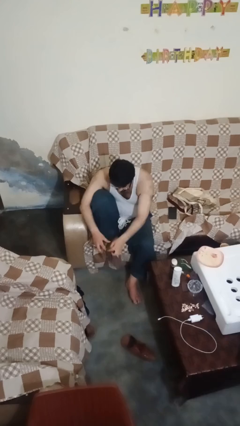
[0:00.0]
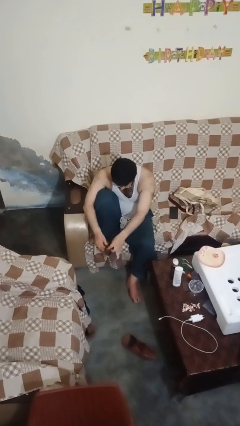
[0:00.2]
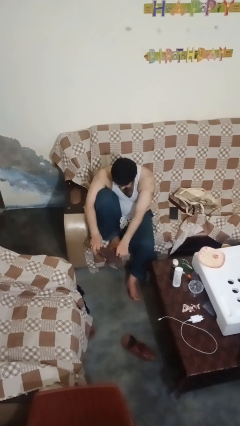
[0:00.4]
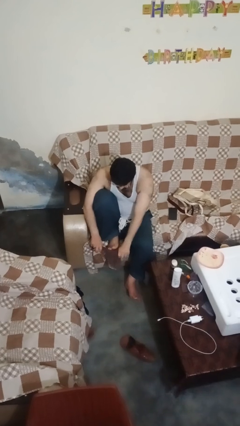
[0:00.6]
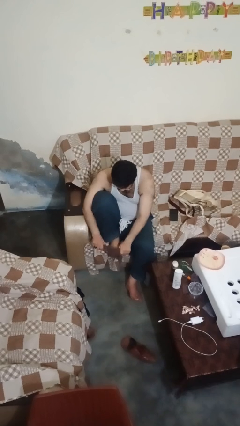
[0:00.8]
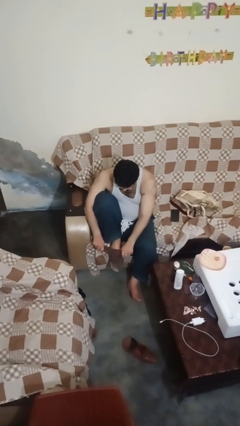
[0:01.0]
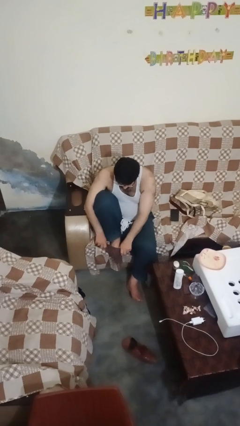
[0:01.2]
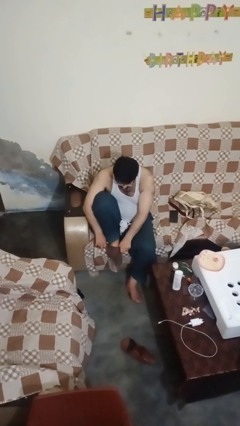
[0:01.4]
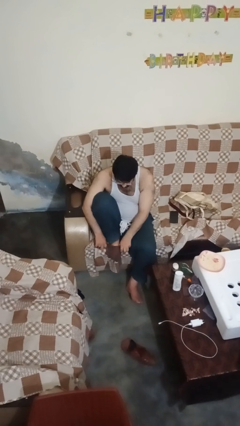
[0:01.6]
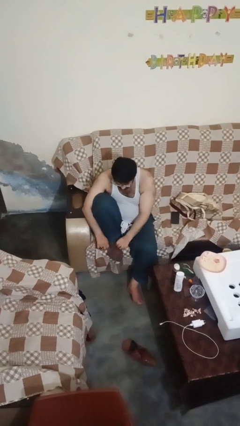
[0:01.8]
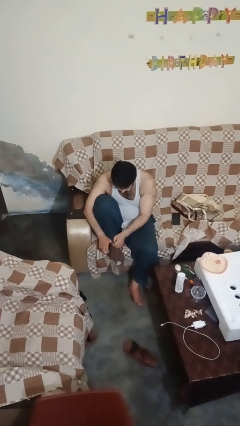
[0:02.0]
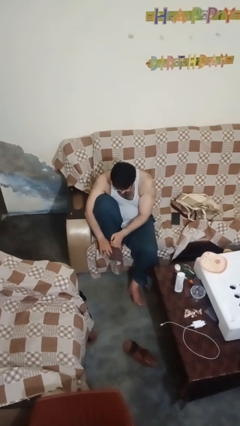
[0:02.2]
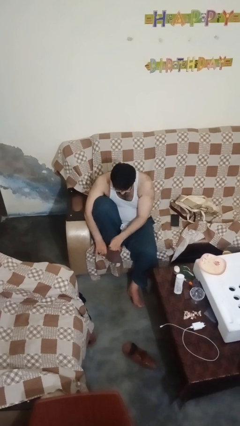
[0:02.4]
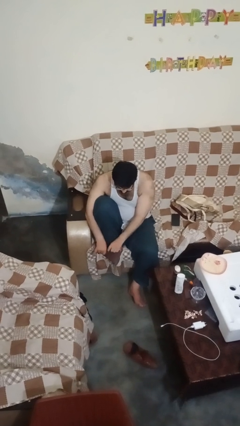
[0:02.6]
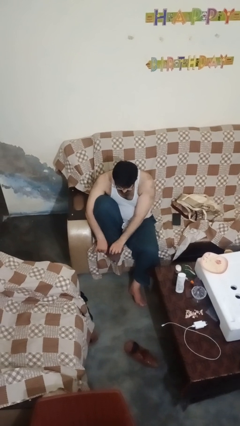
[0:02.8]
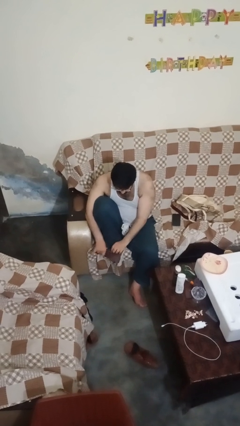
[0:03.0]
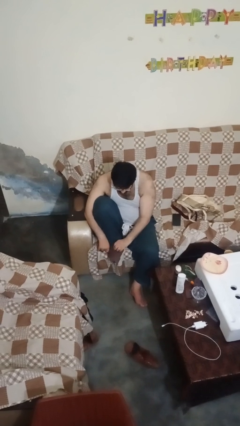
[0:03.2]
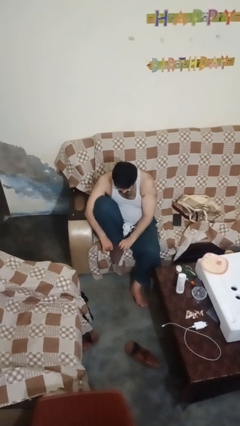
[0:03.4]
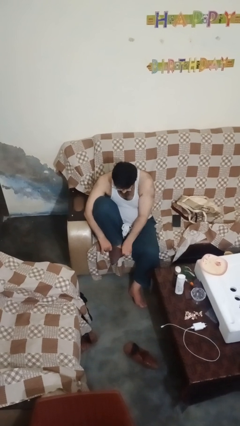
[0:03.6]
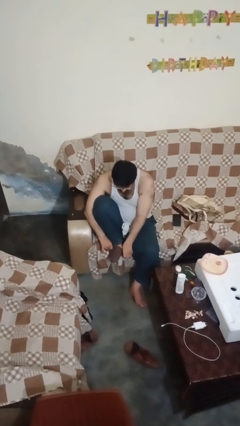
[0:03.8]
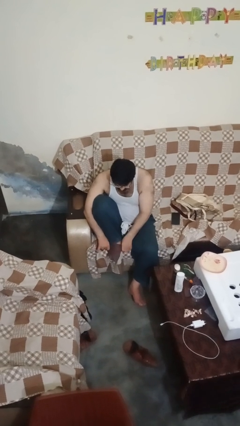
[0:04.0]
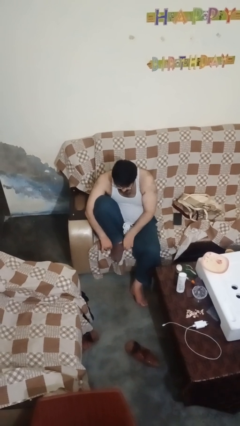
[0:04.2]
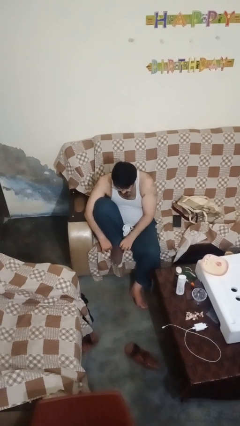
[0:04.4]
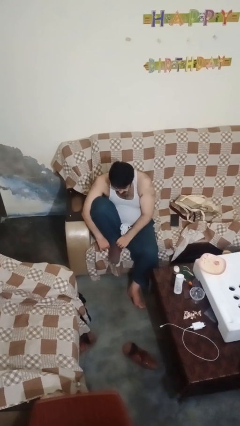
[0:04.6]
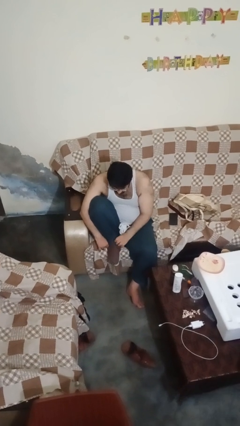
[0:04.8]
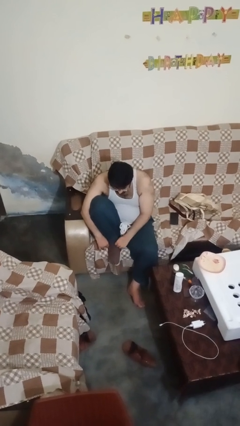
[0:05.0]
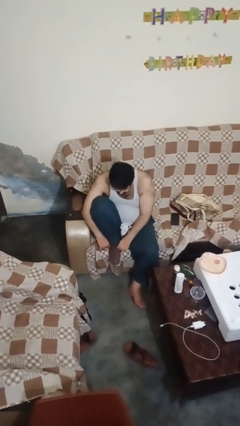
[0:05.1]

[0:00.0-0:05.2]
person puts on socks

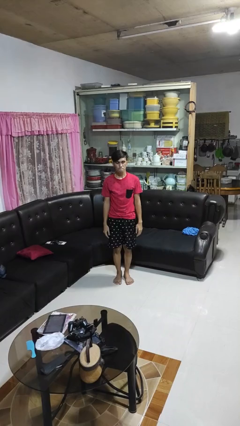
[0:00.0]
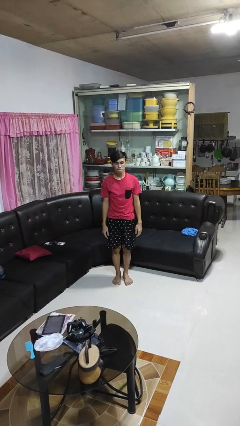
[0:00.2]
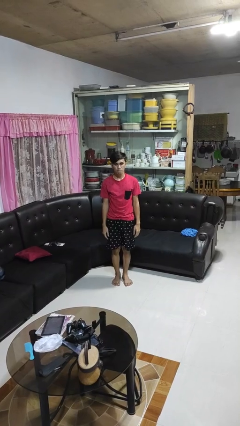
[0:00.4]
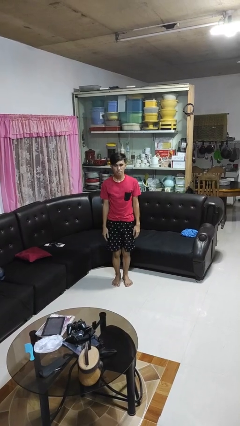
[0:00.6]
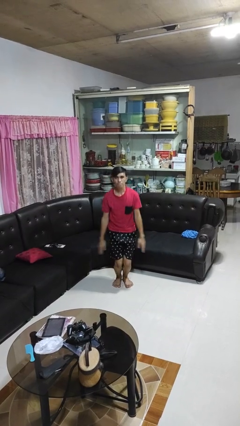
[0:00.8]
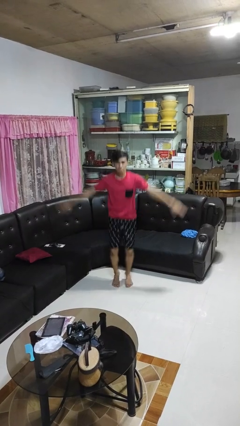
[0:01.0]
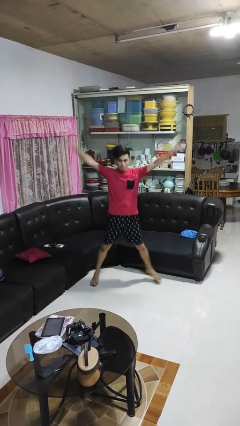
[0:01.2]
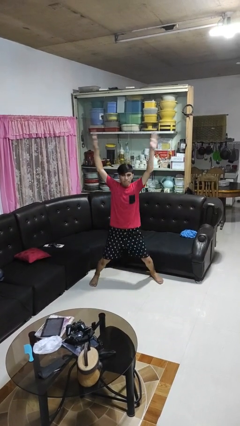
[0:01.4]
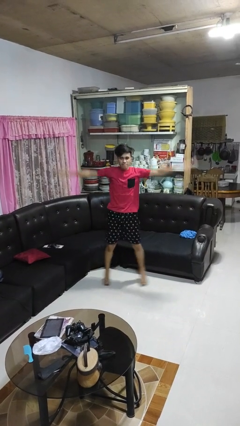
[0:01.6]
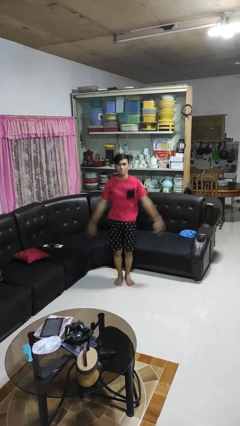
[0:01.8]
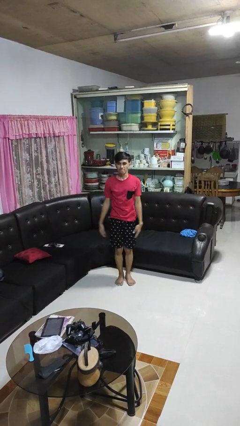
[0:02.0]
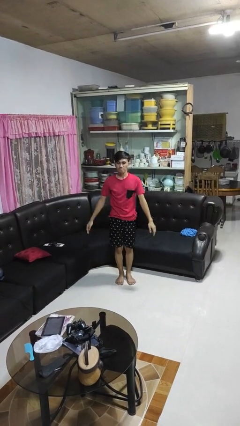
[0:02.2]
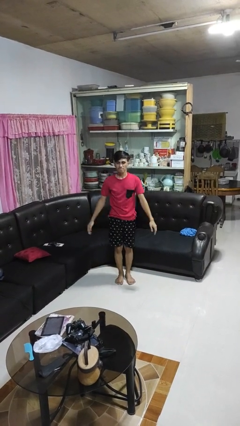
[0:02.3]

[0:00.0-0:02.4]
person exercises with jumping jacks

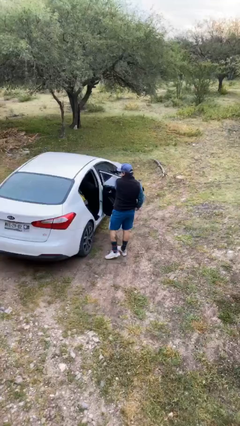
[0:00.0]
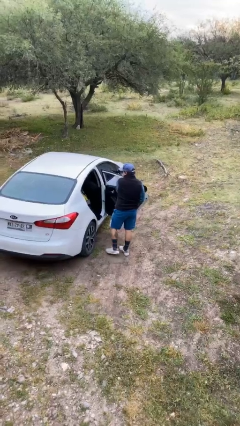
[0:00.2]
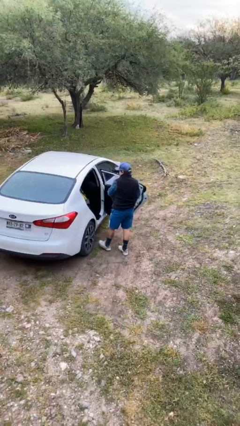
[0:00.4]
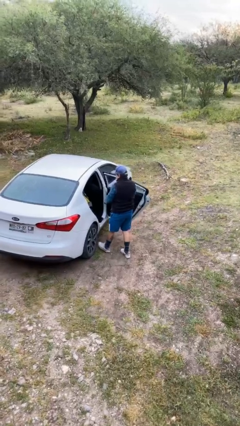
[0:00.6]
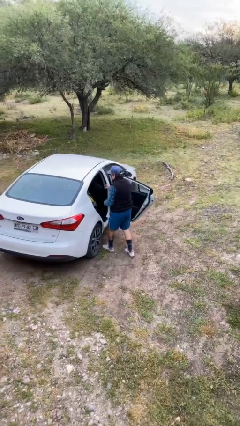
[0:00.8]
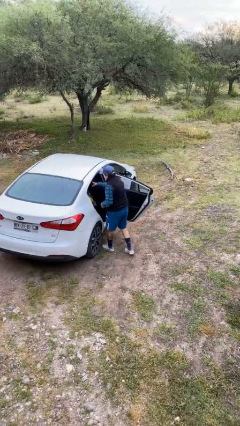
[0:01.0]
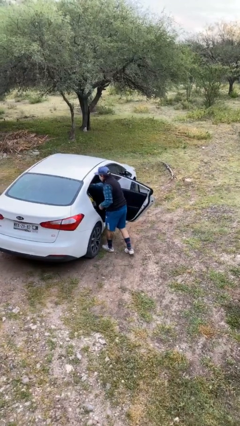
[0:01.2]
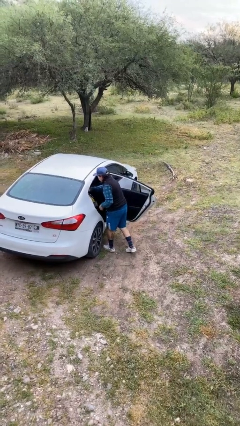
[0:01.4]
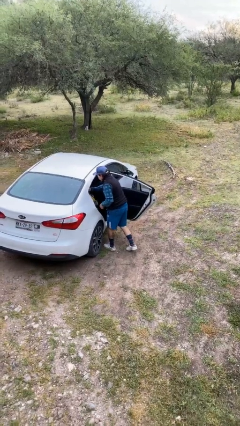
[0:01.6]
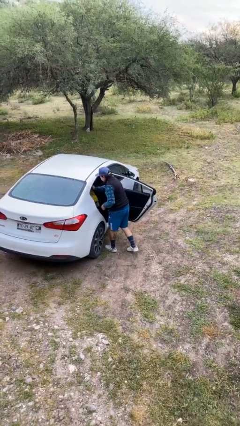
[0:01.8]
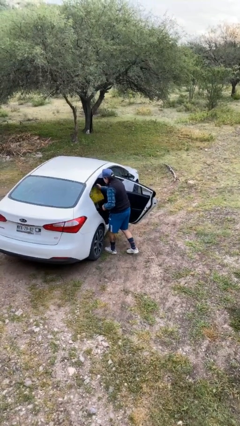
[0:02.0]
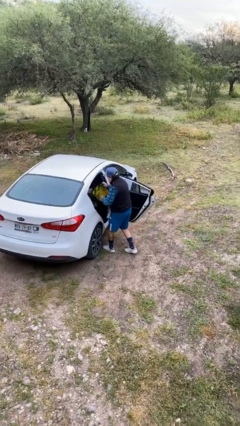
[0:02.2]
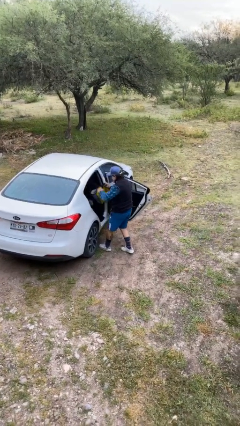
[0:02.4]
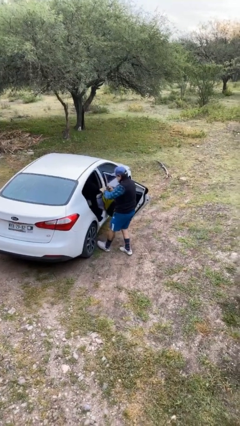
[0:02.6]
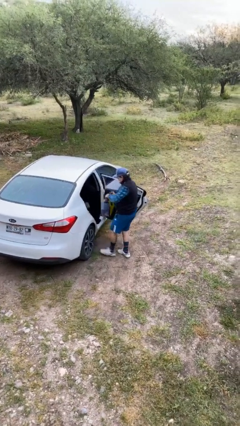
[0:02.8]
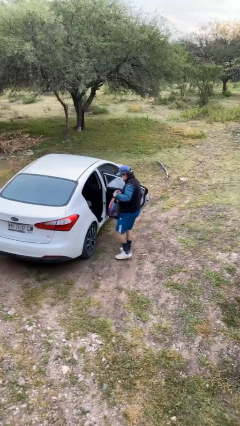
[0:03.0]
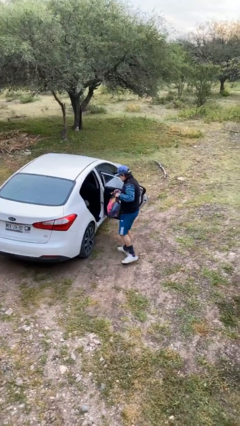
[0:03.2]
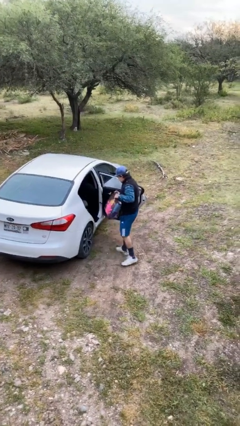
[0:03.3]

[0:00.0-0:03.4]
person unloads car

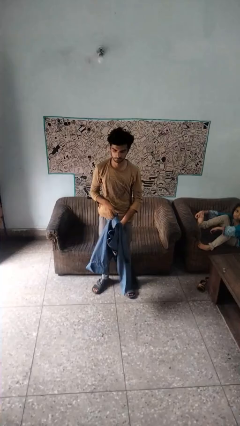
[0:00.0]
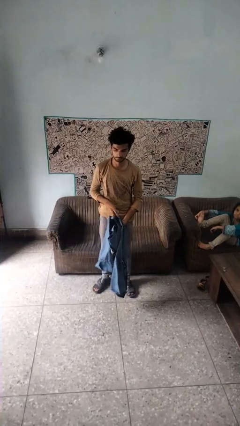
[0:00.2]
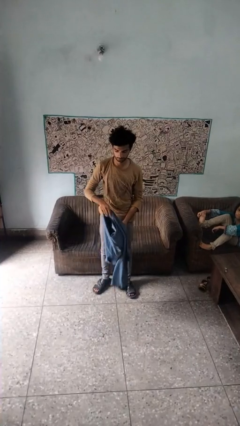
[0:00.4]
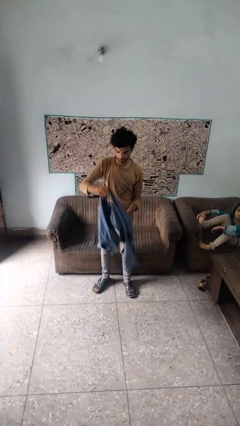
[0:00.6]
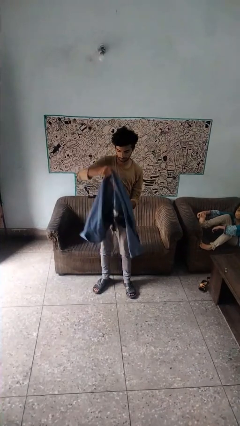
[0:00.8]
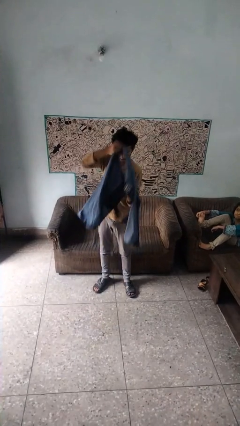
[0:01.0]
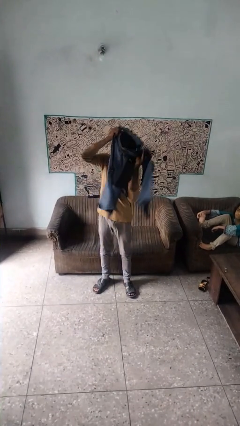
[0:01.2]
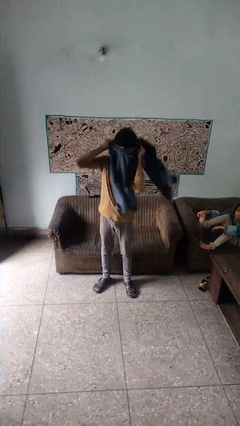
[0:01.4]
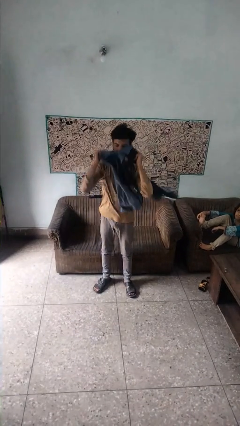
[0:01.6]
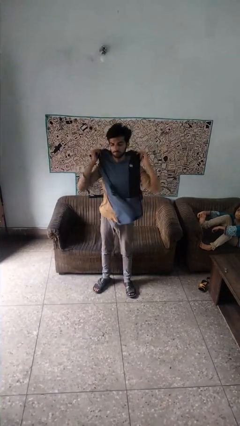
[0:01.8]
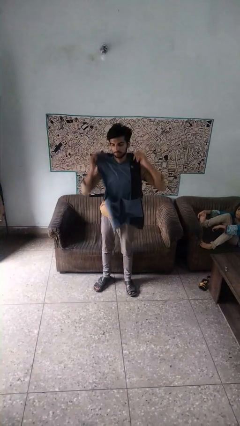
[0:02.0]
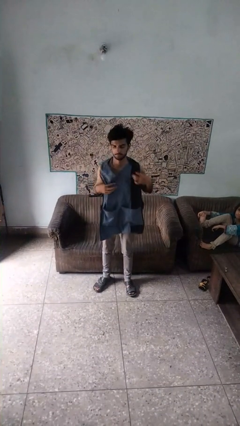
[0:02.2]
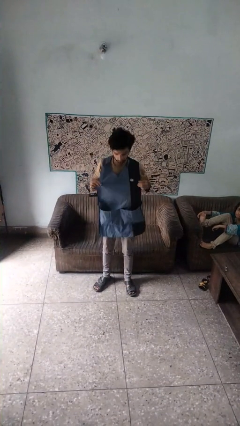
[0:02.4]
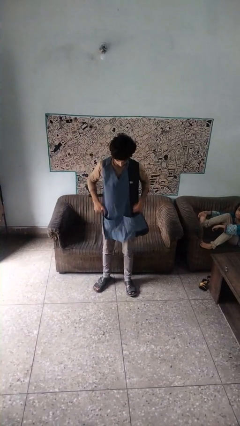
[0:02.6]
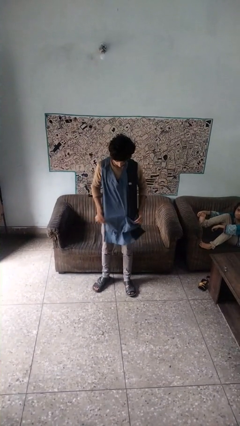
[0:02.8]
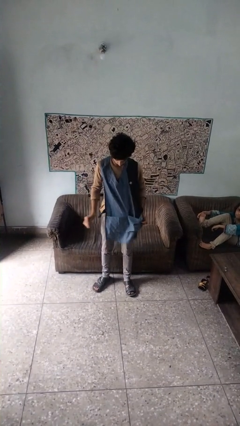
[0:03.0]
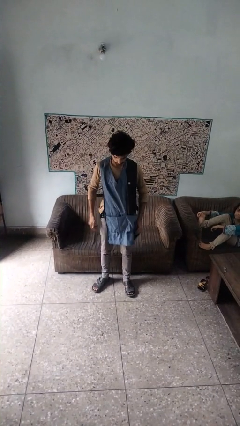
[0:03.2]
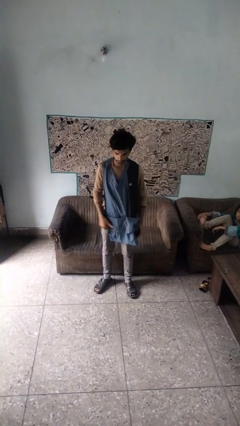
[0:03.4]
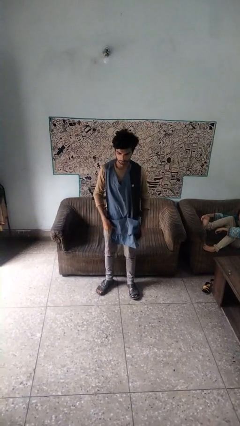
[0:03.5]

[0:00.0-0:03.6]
person puts on apron

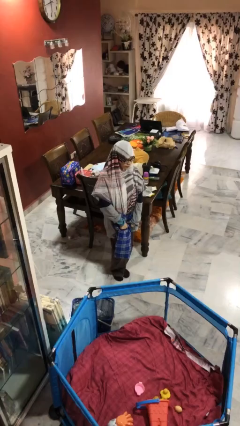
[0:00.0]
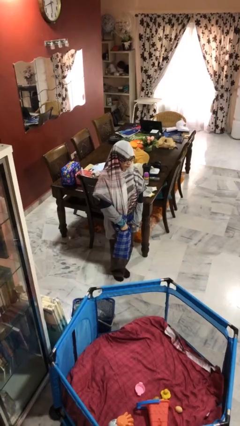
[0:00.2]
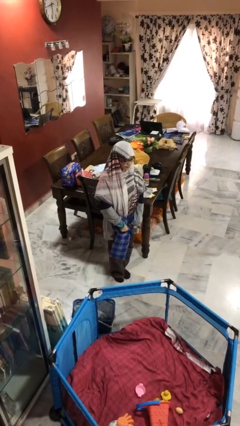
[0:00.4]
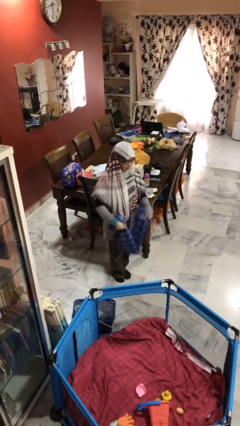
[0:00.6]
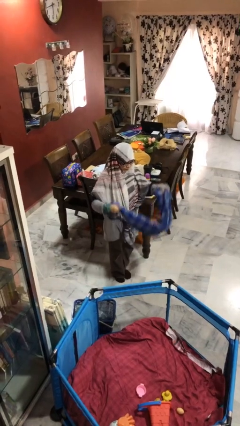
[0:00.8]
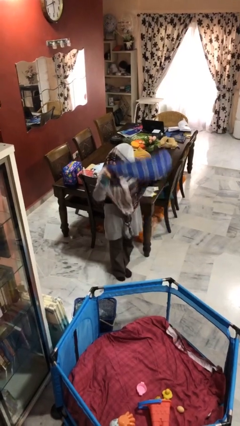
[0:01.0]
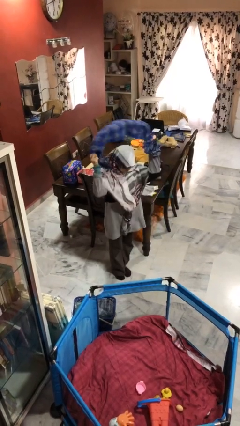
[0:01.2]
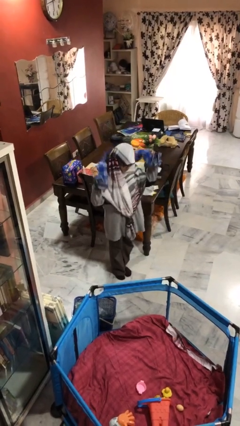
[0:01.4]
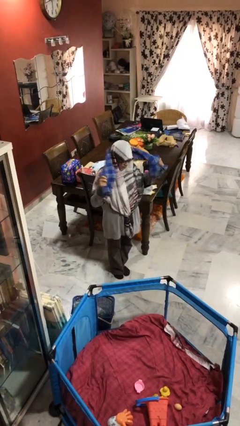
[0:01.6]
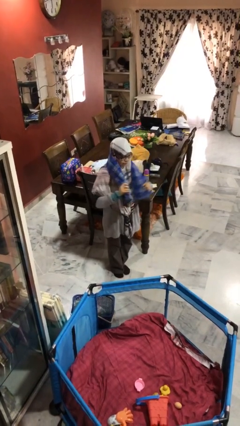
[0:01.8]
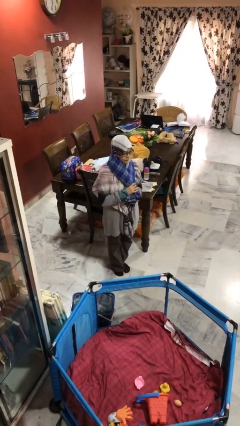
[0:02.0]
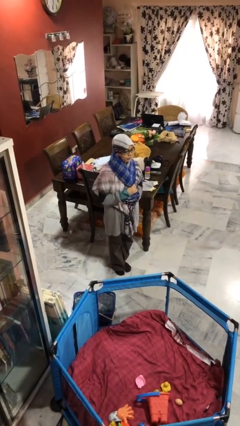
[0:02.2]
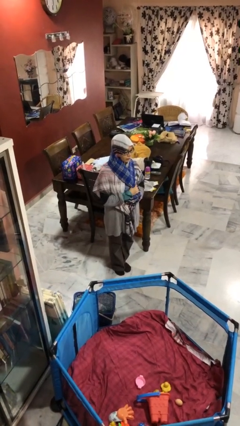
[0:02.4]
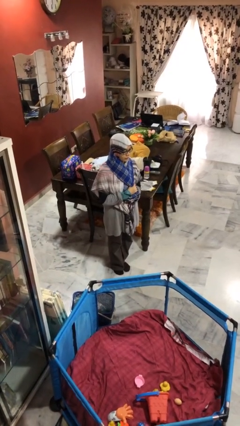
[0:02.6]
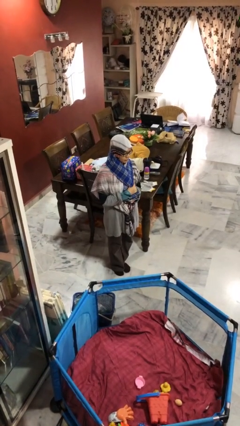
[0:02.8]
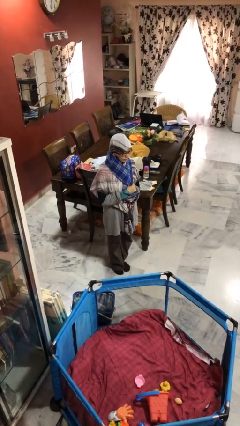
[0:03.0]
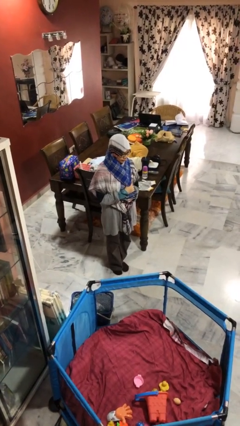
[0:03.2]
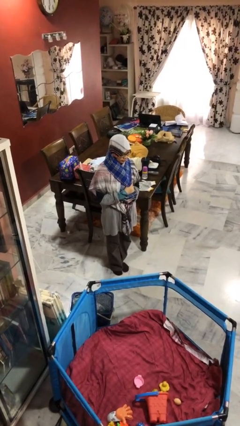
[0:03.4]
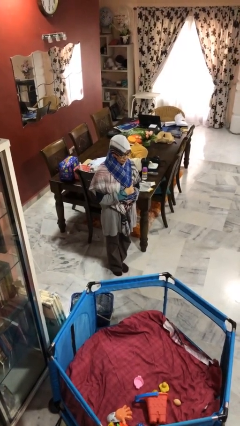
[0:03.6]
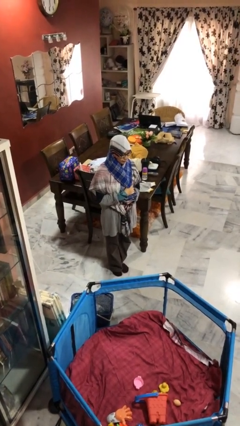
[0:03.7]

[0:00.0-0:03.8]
person puts on scarf
